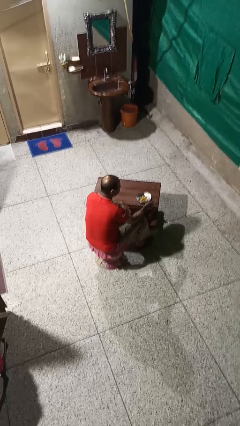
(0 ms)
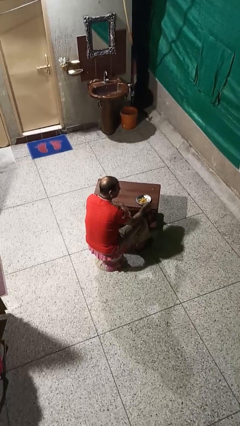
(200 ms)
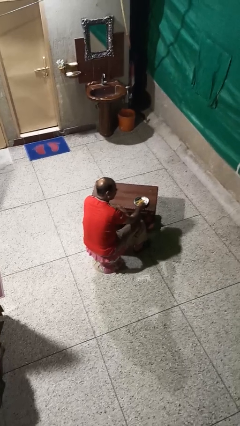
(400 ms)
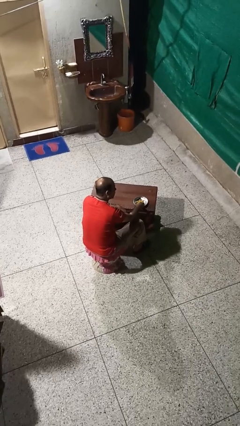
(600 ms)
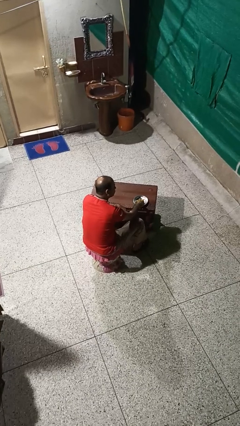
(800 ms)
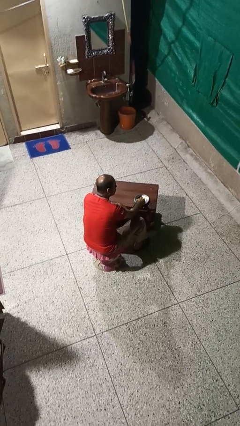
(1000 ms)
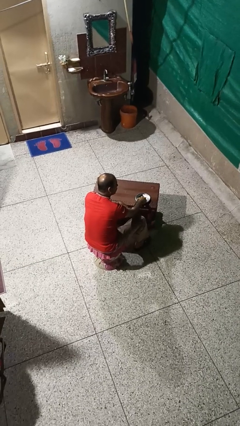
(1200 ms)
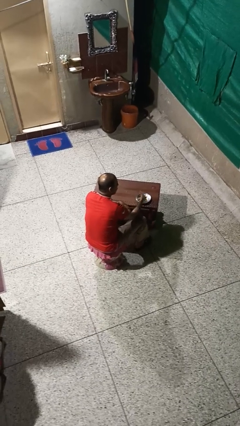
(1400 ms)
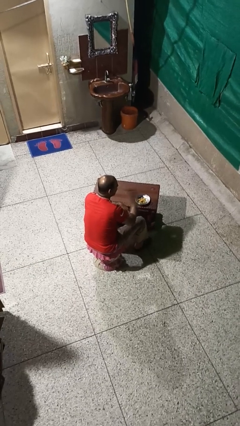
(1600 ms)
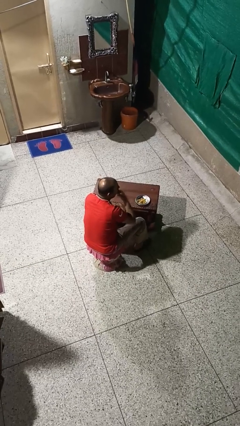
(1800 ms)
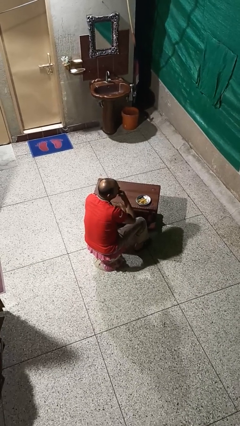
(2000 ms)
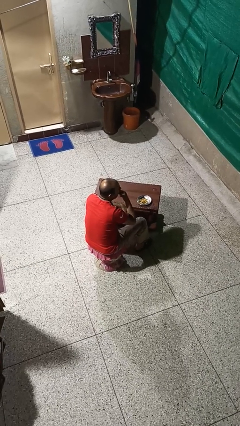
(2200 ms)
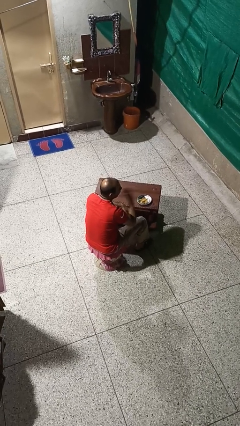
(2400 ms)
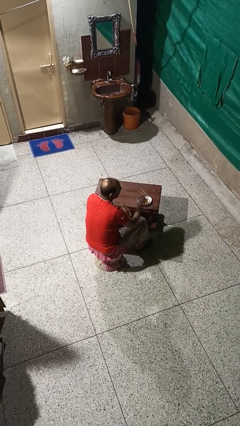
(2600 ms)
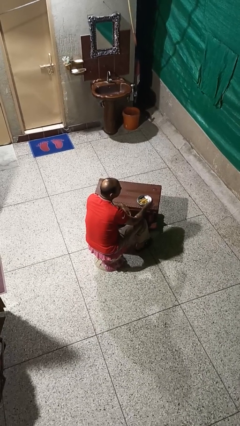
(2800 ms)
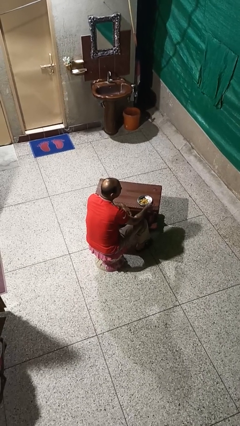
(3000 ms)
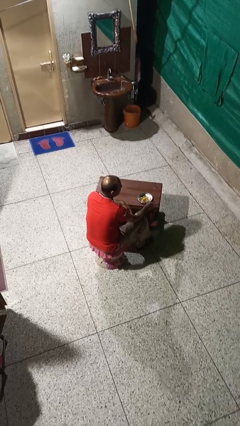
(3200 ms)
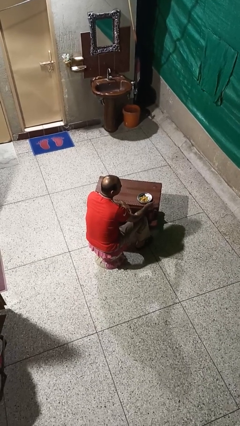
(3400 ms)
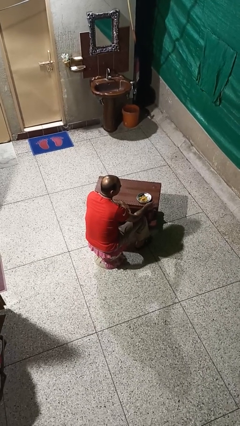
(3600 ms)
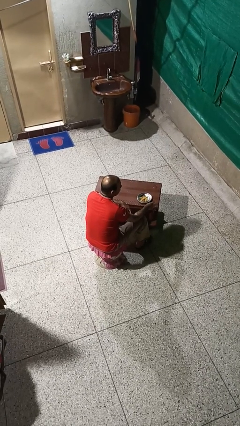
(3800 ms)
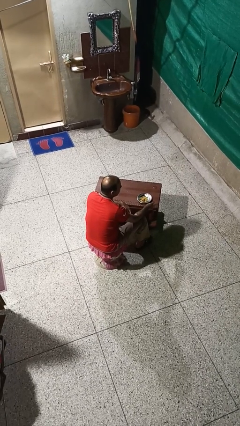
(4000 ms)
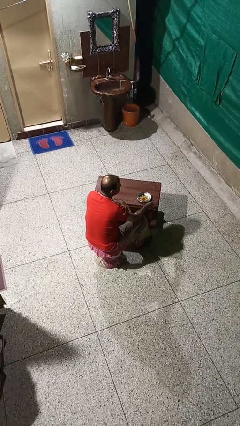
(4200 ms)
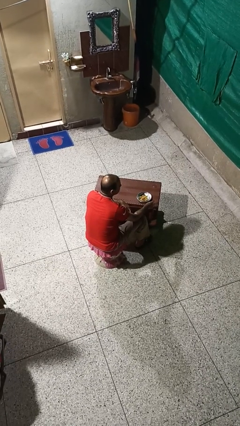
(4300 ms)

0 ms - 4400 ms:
person eats with hands

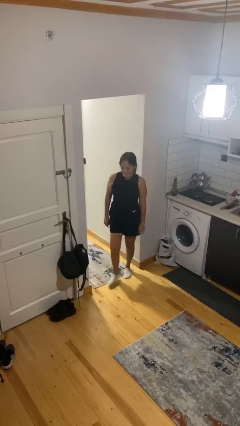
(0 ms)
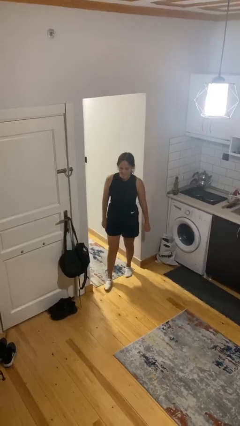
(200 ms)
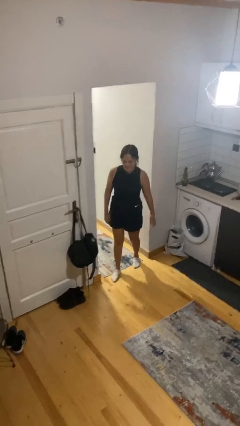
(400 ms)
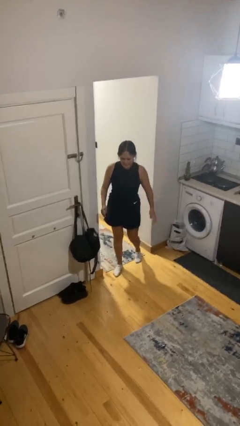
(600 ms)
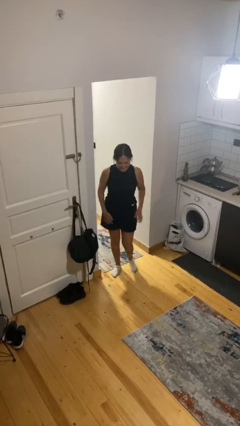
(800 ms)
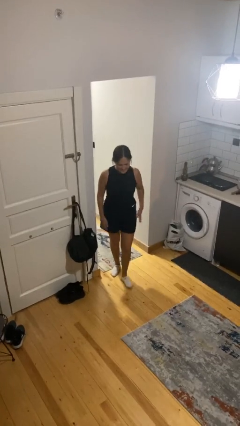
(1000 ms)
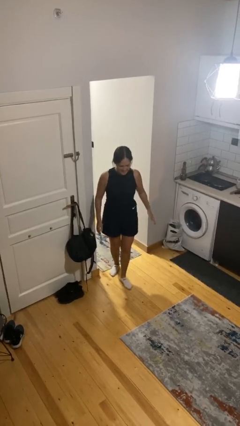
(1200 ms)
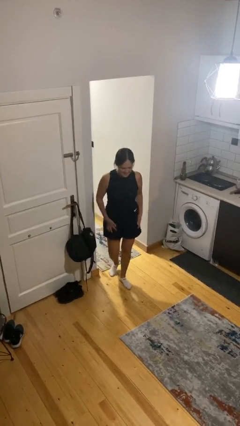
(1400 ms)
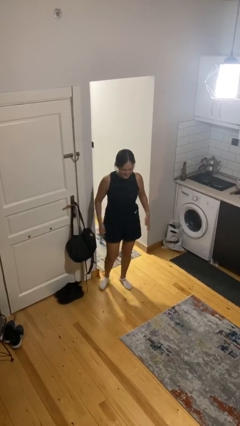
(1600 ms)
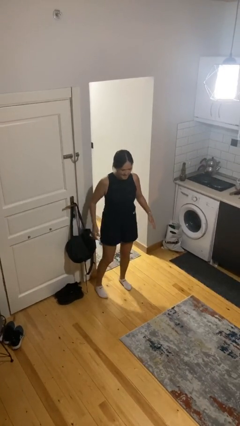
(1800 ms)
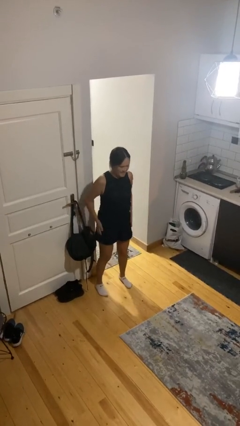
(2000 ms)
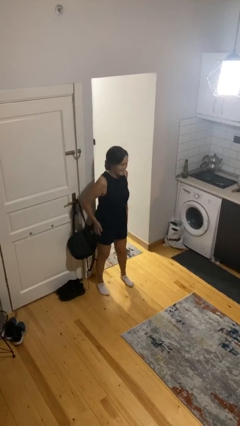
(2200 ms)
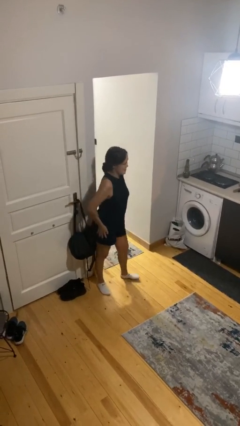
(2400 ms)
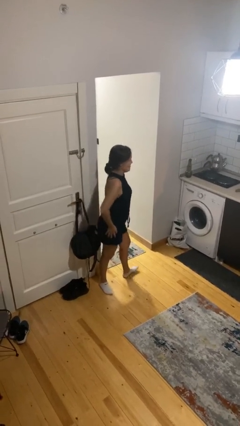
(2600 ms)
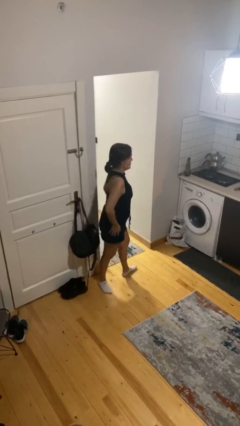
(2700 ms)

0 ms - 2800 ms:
person slaps hands on thighs

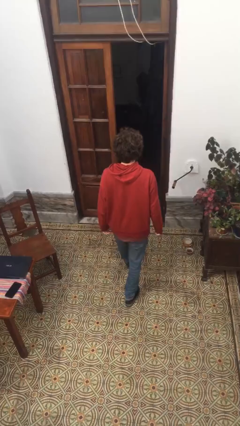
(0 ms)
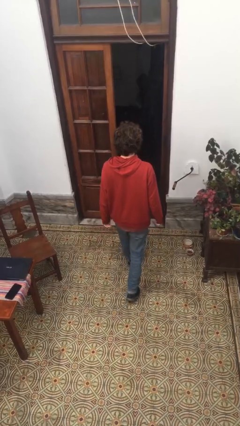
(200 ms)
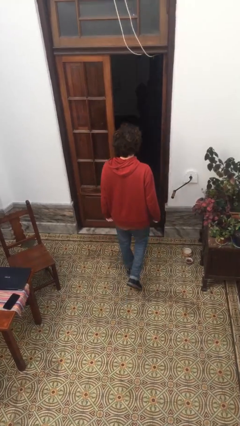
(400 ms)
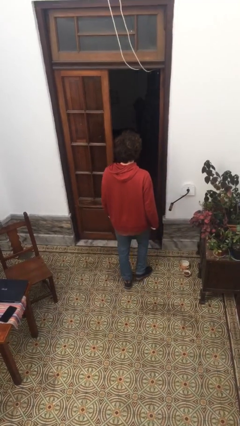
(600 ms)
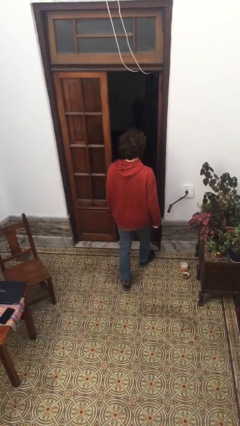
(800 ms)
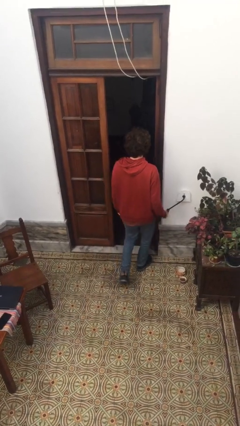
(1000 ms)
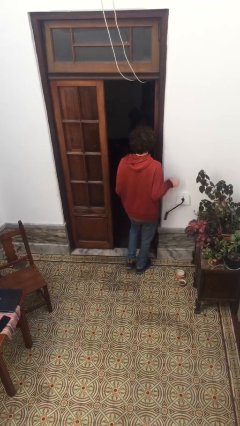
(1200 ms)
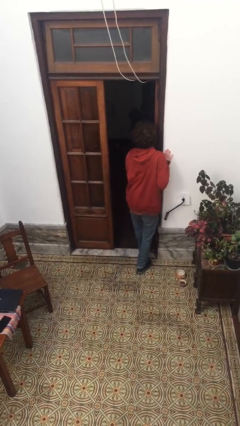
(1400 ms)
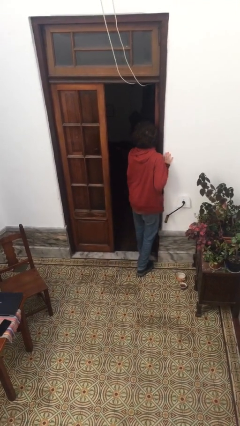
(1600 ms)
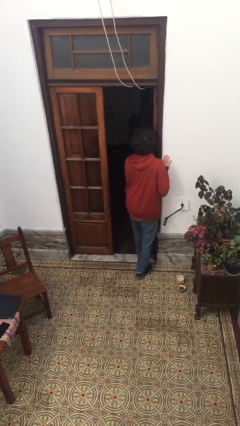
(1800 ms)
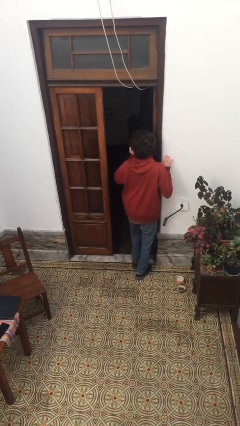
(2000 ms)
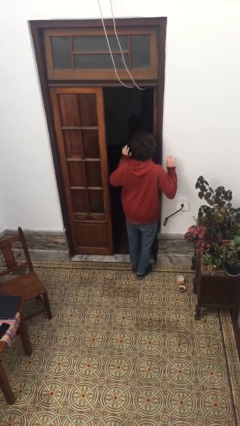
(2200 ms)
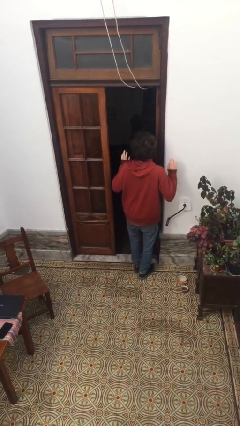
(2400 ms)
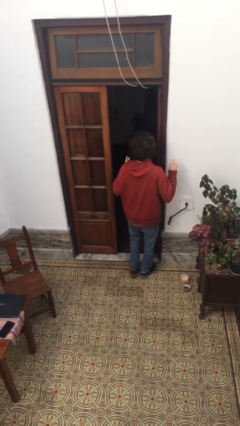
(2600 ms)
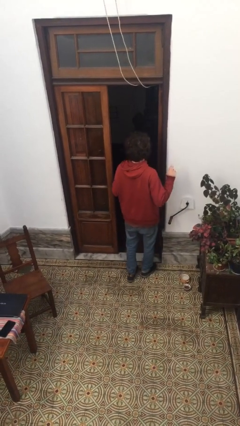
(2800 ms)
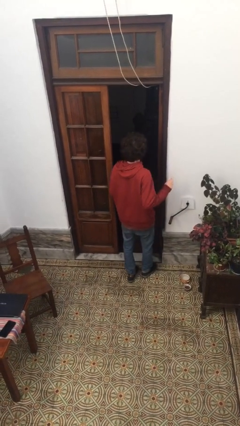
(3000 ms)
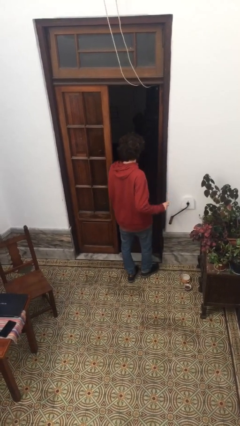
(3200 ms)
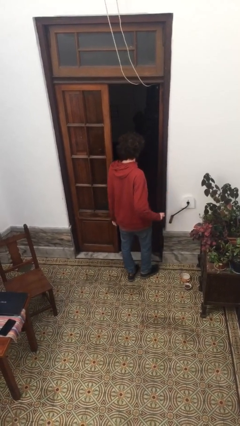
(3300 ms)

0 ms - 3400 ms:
person bumps into wall

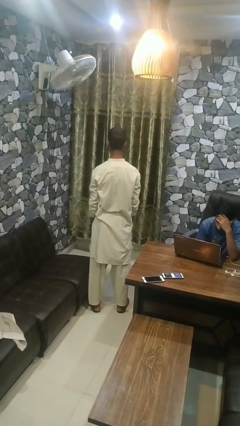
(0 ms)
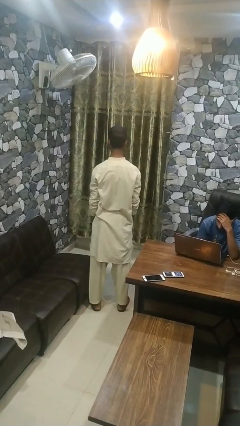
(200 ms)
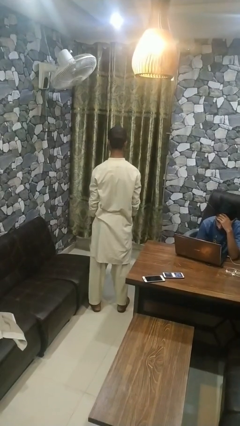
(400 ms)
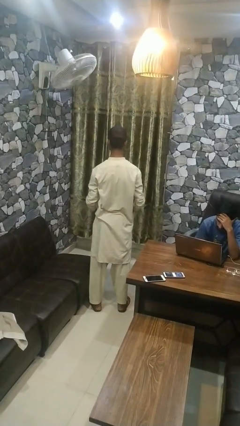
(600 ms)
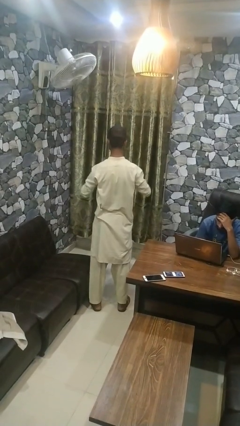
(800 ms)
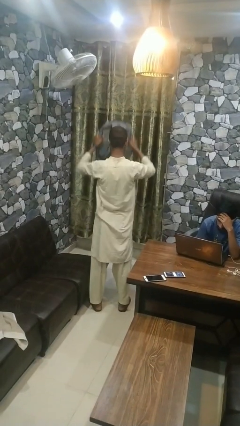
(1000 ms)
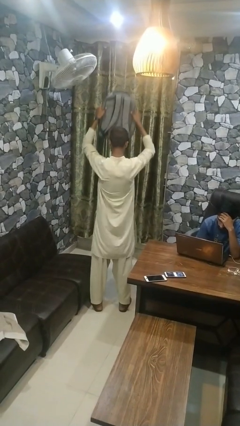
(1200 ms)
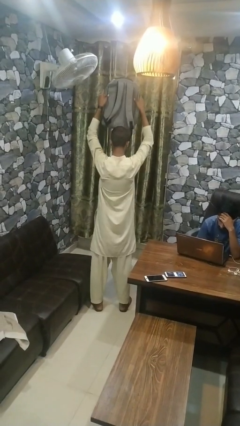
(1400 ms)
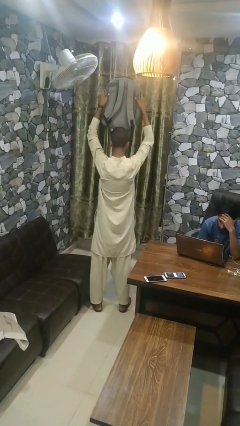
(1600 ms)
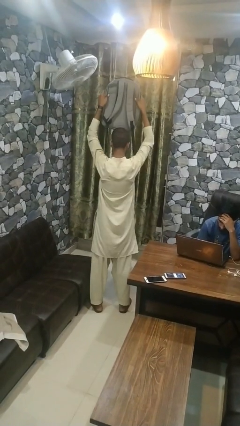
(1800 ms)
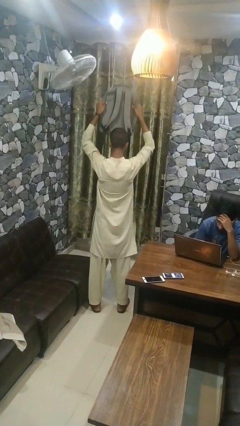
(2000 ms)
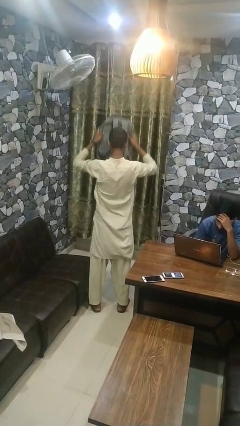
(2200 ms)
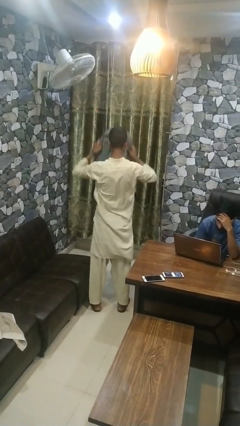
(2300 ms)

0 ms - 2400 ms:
person holds object above head

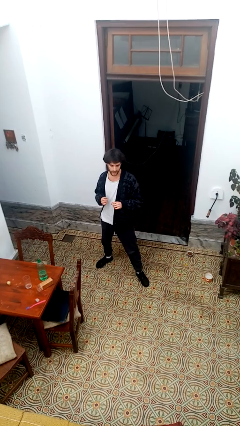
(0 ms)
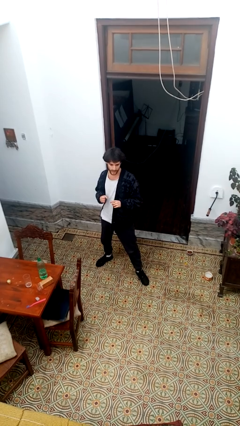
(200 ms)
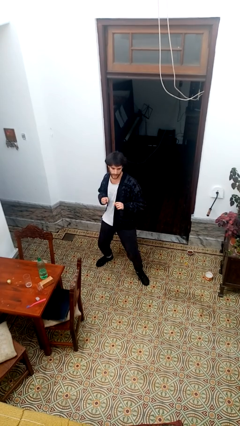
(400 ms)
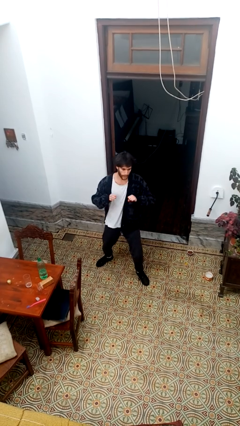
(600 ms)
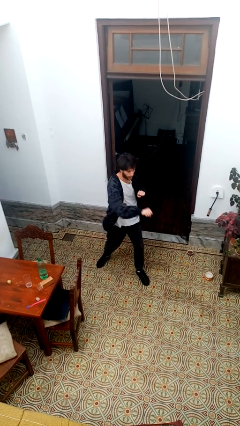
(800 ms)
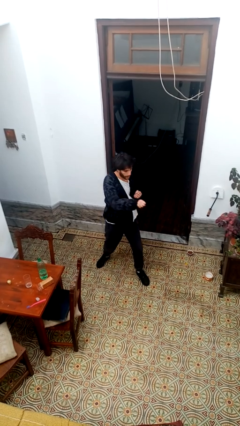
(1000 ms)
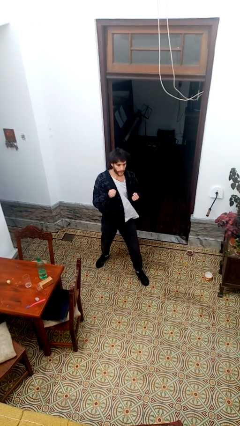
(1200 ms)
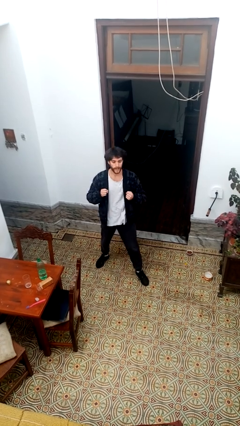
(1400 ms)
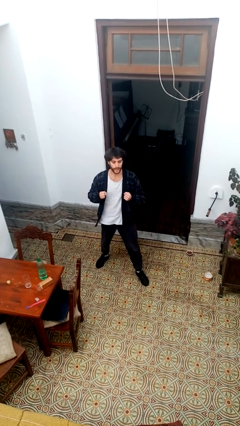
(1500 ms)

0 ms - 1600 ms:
person karate chop

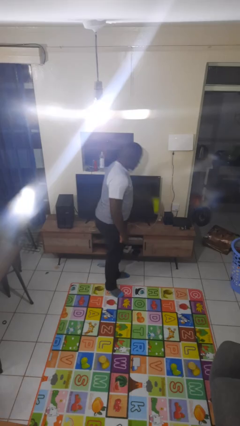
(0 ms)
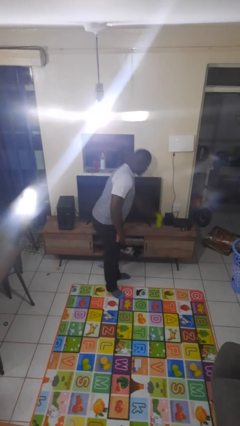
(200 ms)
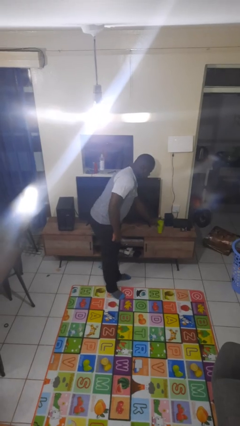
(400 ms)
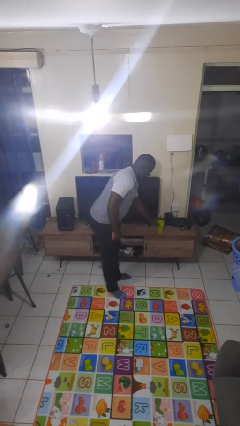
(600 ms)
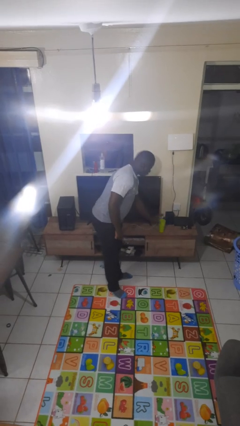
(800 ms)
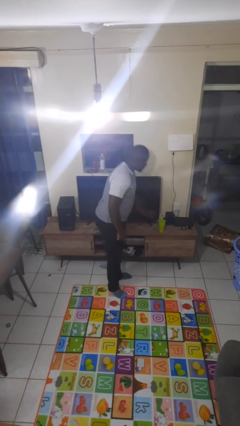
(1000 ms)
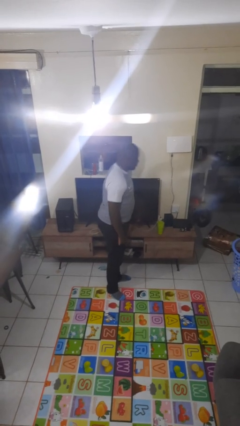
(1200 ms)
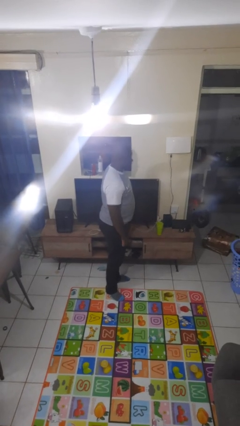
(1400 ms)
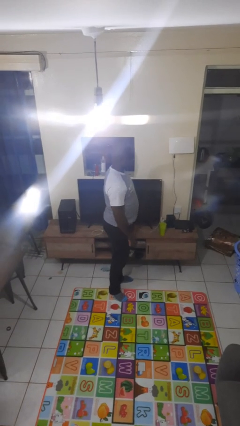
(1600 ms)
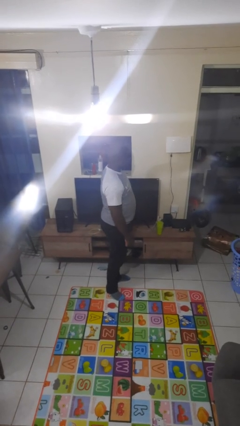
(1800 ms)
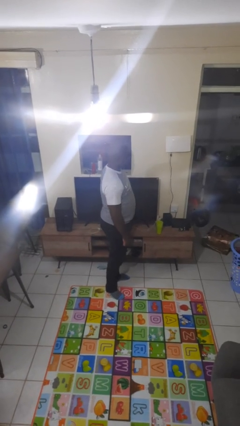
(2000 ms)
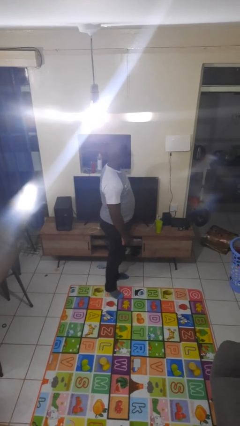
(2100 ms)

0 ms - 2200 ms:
person puts down object on countertop

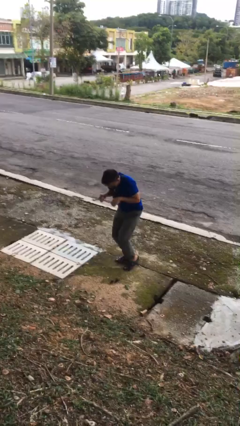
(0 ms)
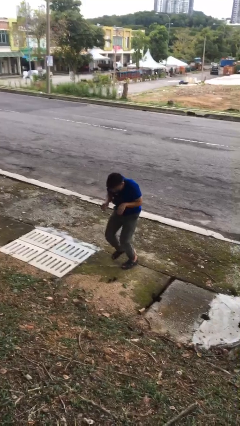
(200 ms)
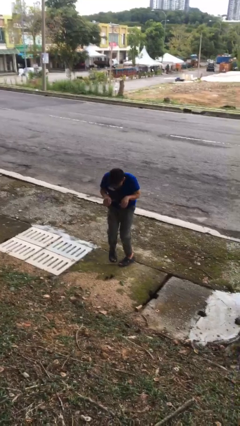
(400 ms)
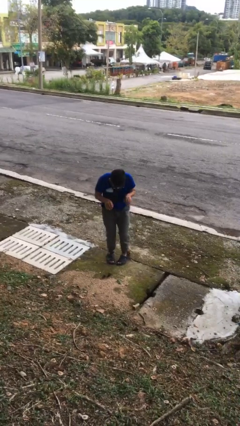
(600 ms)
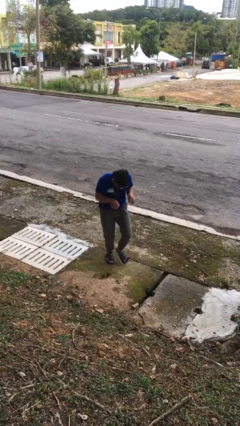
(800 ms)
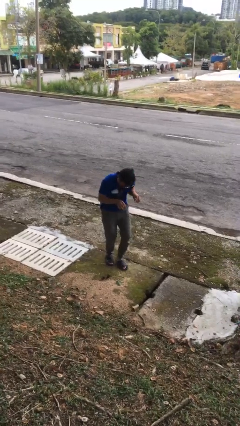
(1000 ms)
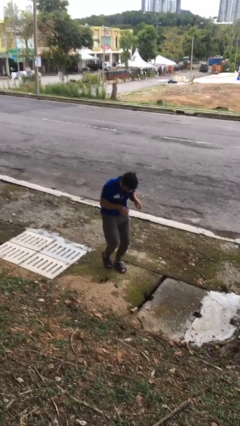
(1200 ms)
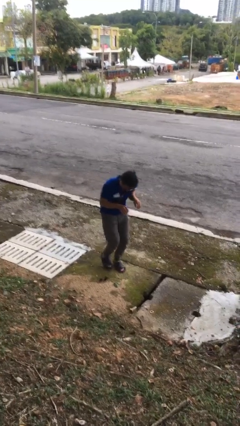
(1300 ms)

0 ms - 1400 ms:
person walks tiptoe
